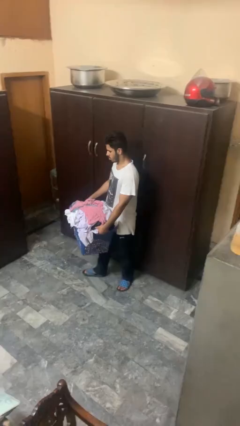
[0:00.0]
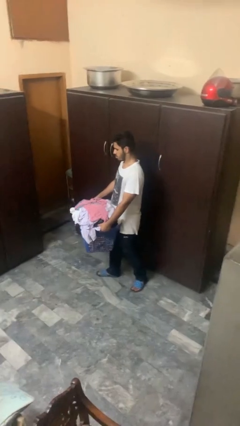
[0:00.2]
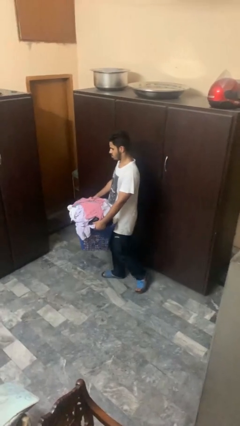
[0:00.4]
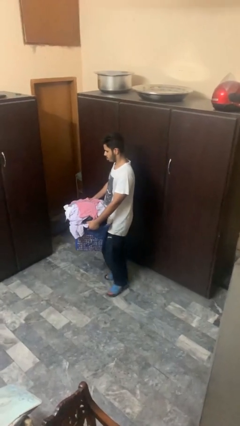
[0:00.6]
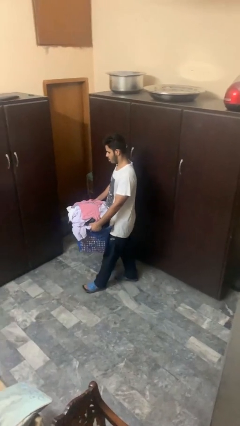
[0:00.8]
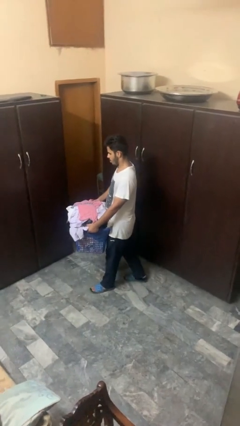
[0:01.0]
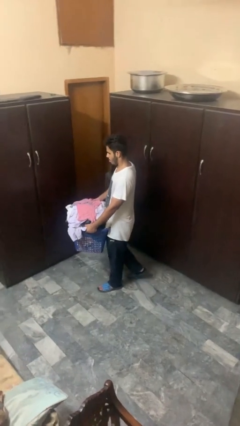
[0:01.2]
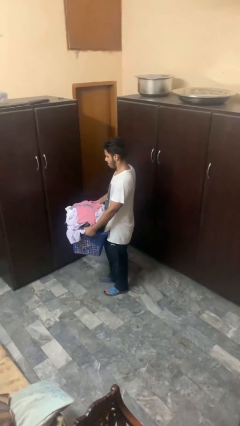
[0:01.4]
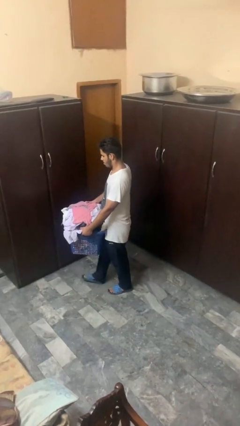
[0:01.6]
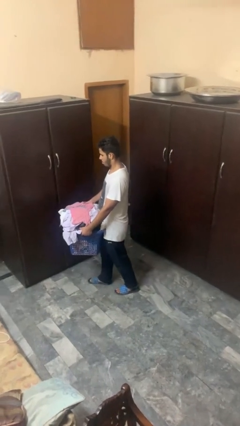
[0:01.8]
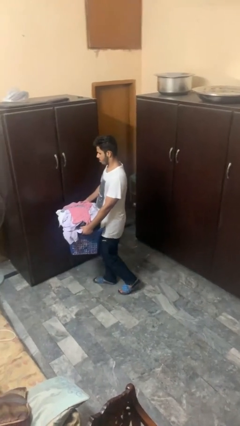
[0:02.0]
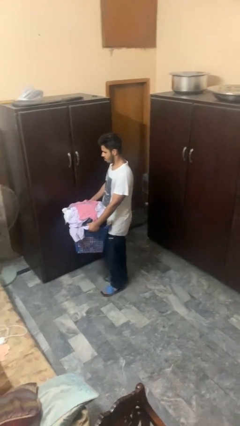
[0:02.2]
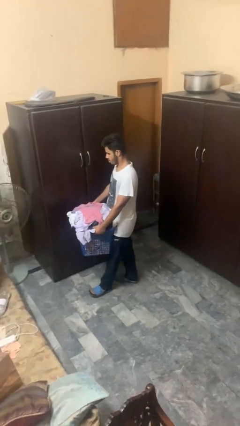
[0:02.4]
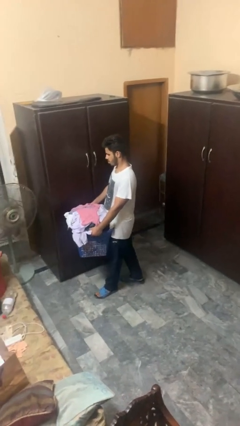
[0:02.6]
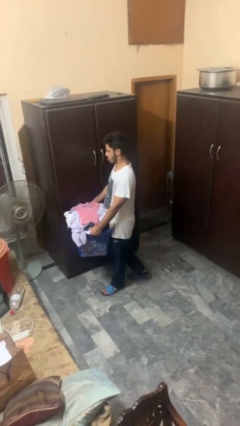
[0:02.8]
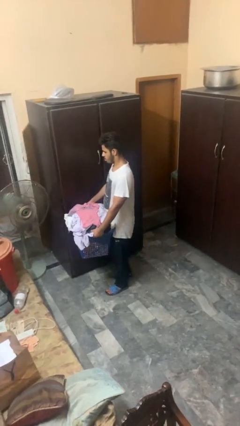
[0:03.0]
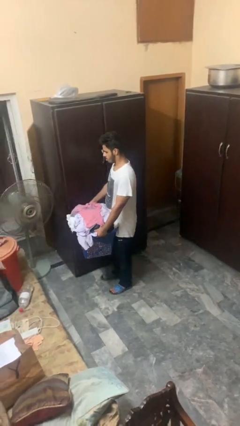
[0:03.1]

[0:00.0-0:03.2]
person carries laundry basket

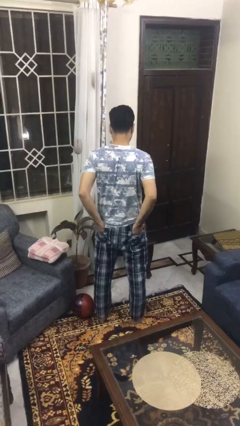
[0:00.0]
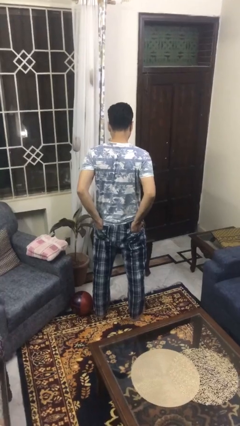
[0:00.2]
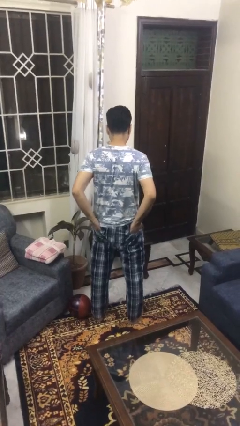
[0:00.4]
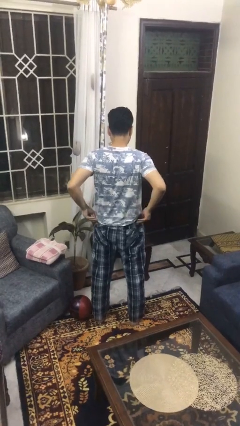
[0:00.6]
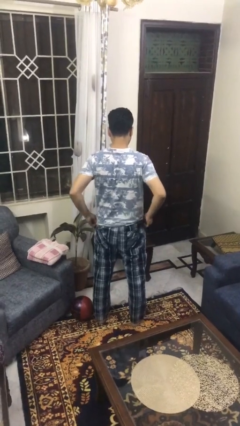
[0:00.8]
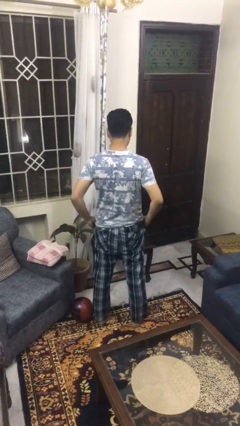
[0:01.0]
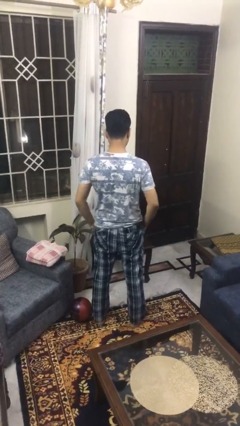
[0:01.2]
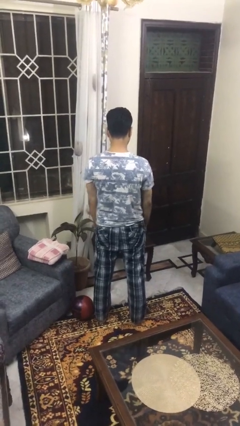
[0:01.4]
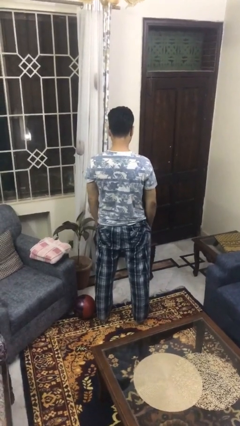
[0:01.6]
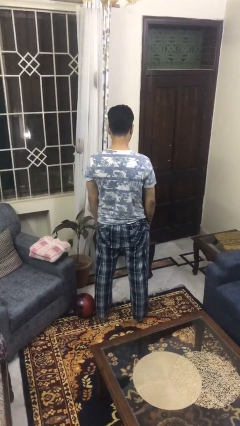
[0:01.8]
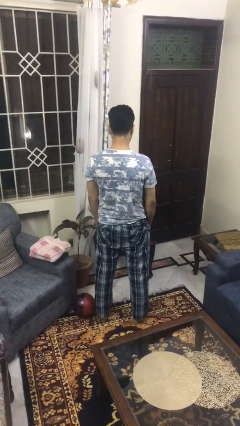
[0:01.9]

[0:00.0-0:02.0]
person puts hands in back pockets

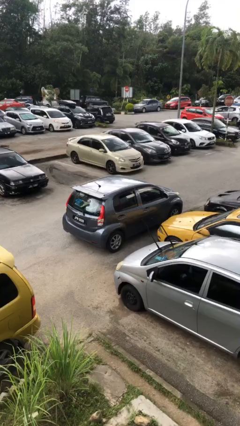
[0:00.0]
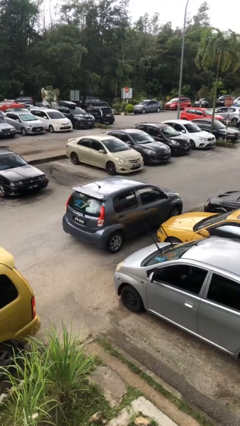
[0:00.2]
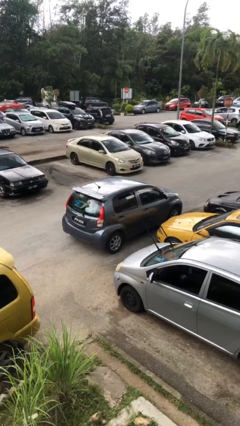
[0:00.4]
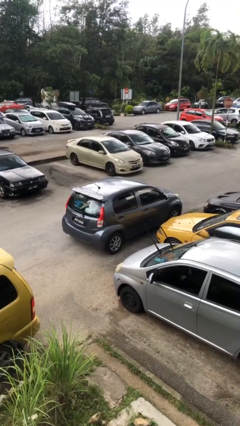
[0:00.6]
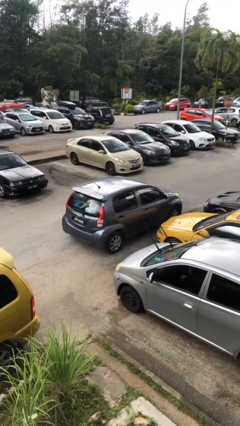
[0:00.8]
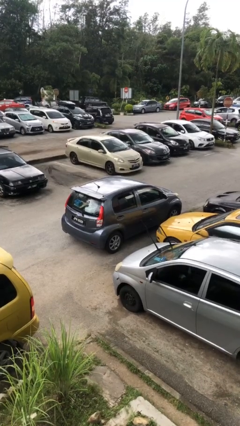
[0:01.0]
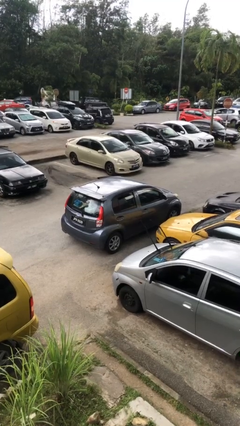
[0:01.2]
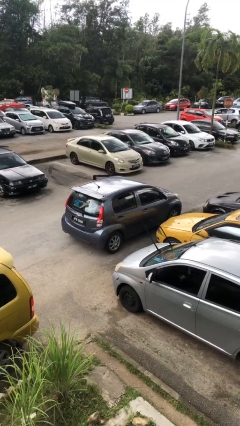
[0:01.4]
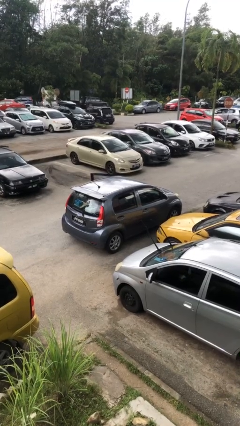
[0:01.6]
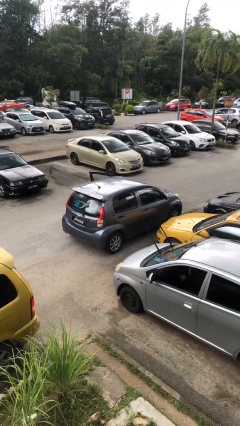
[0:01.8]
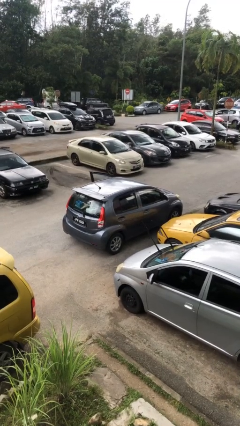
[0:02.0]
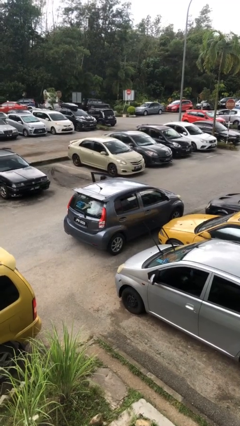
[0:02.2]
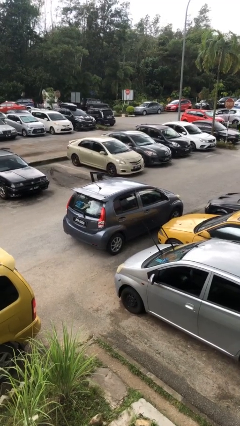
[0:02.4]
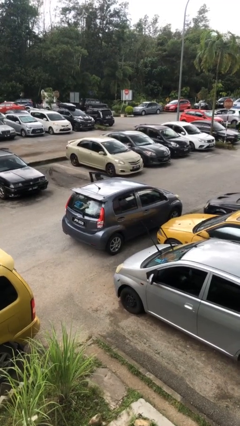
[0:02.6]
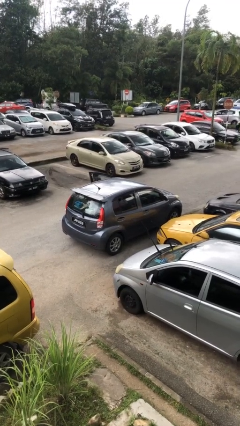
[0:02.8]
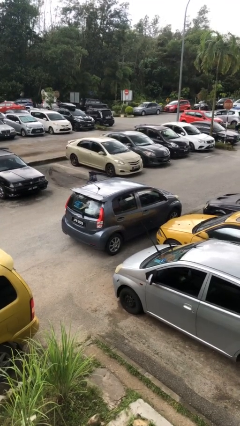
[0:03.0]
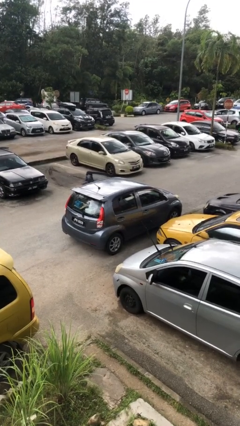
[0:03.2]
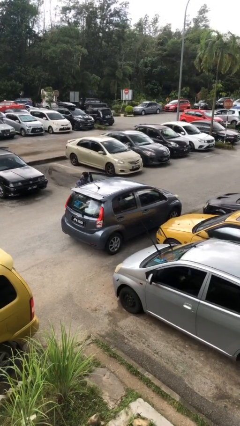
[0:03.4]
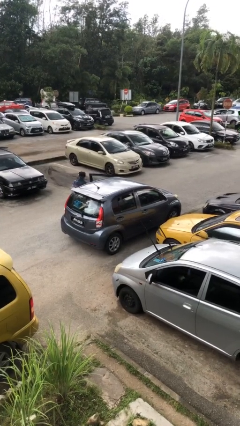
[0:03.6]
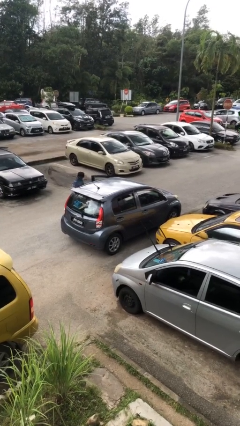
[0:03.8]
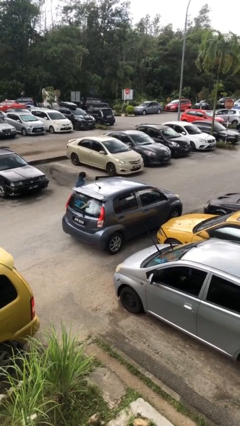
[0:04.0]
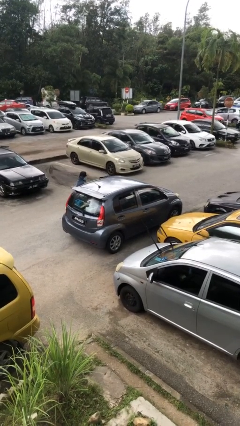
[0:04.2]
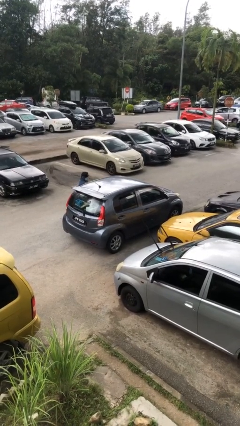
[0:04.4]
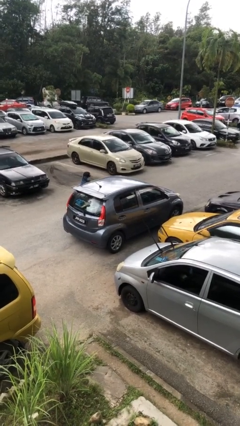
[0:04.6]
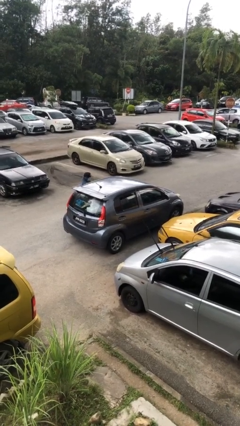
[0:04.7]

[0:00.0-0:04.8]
car drops off person

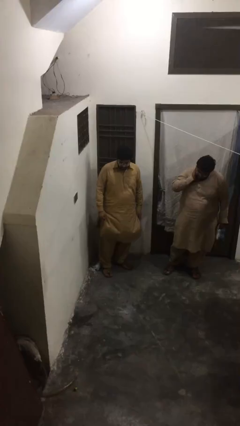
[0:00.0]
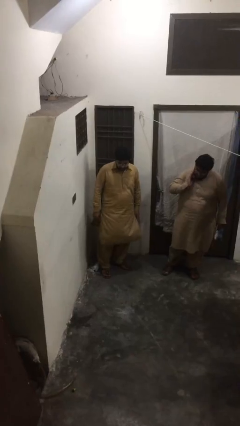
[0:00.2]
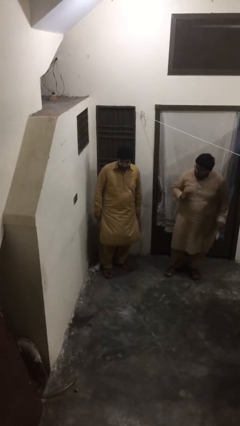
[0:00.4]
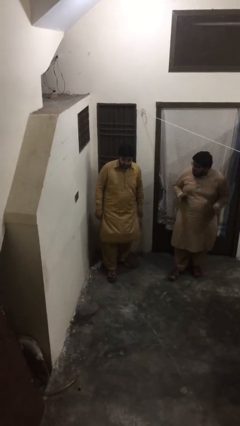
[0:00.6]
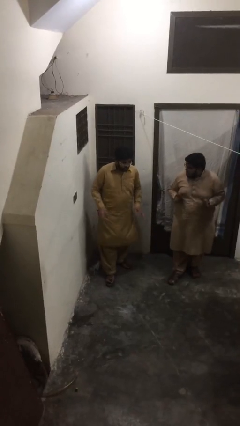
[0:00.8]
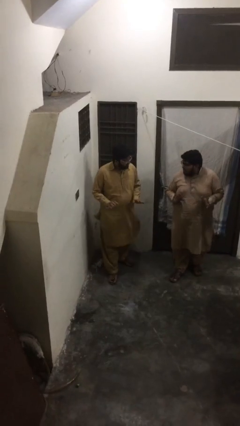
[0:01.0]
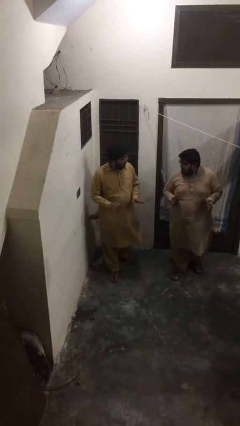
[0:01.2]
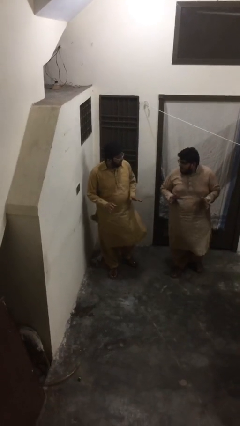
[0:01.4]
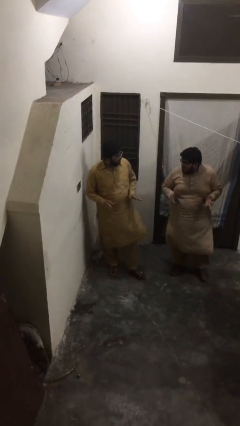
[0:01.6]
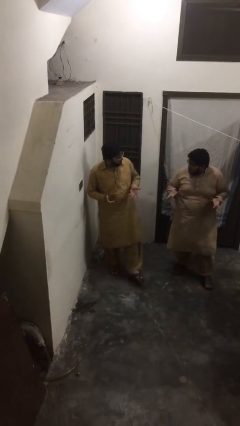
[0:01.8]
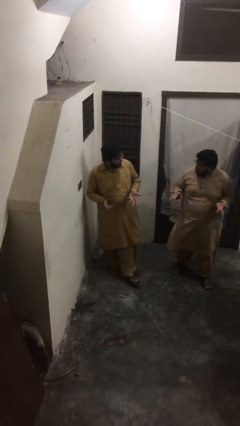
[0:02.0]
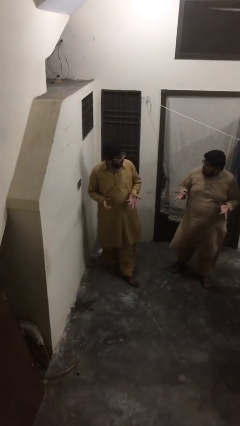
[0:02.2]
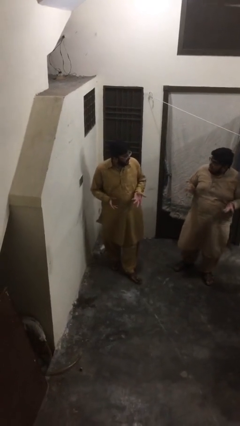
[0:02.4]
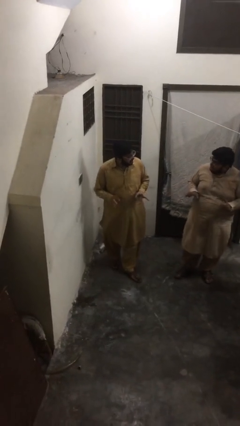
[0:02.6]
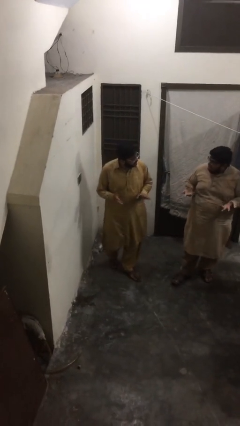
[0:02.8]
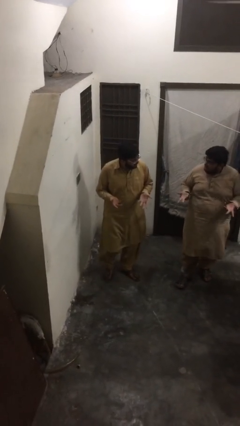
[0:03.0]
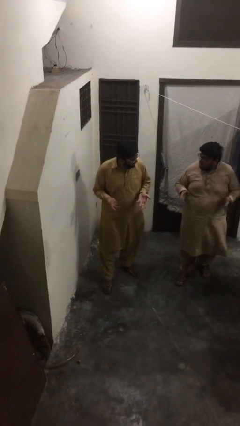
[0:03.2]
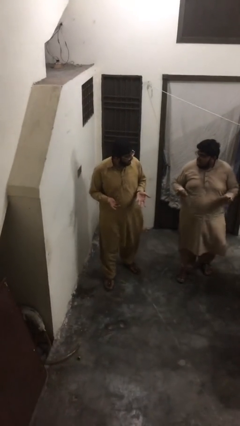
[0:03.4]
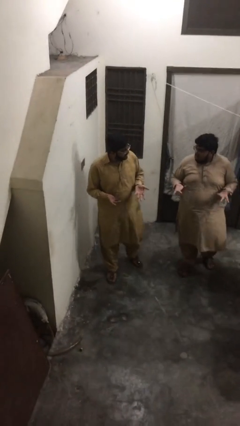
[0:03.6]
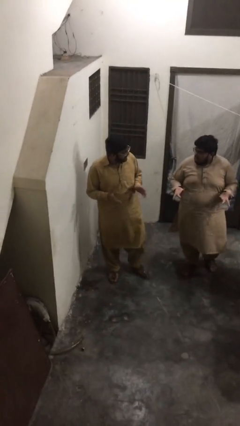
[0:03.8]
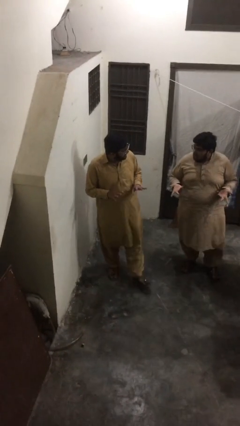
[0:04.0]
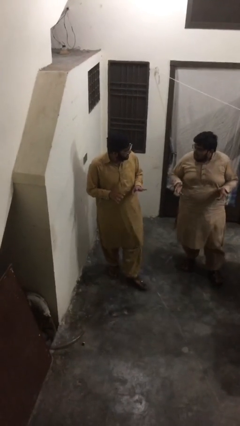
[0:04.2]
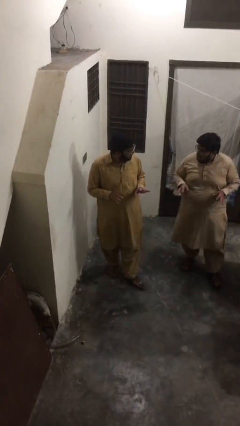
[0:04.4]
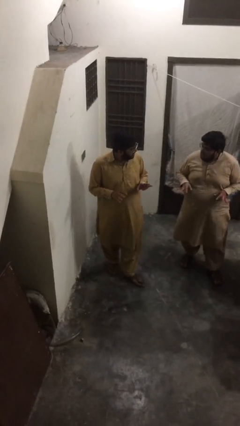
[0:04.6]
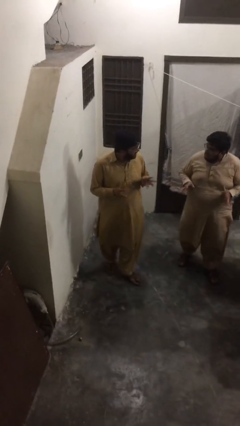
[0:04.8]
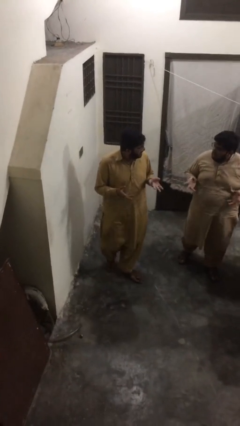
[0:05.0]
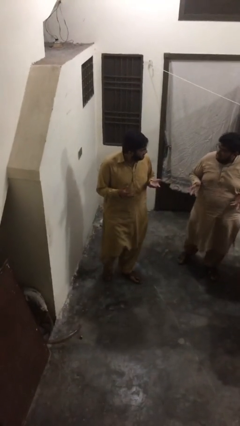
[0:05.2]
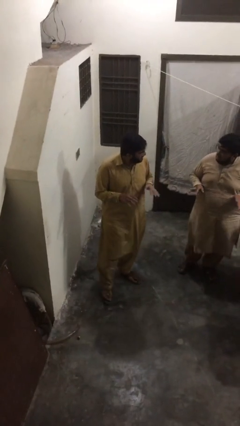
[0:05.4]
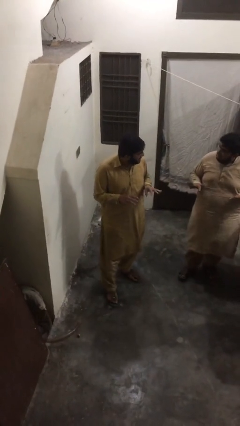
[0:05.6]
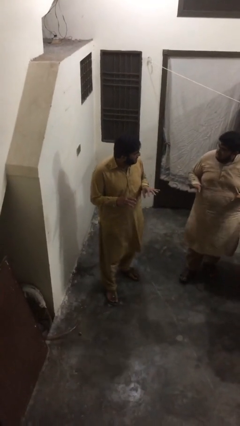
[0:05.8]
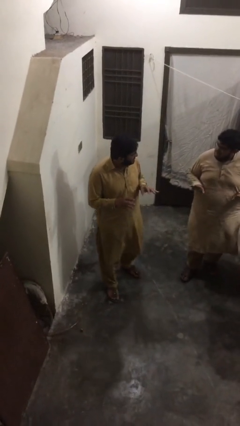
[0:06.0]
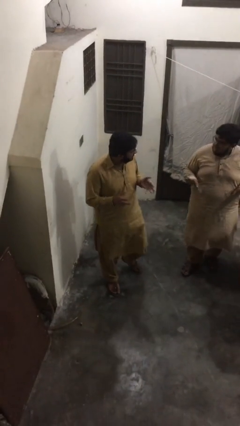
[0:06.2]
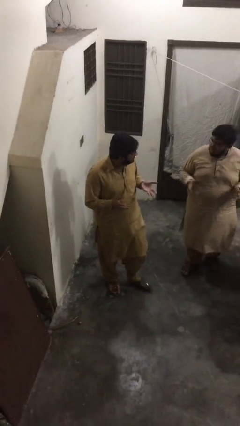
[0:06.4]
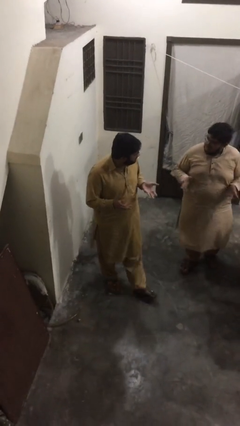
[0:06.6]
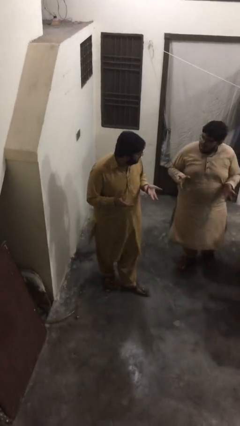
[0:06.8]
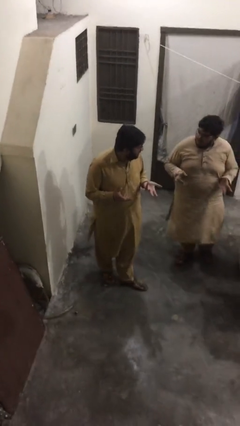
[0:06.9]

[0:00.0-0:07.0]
person talks to person

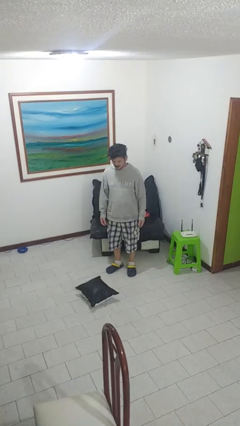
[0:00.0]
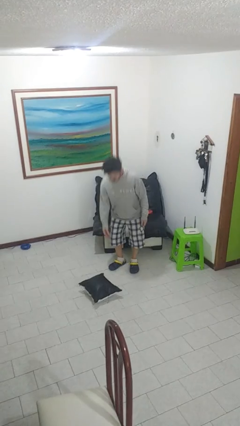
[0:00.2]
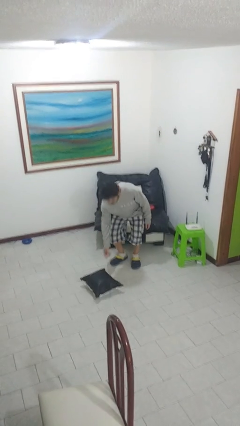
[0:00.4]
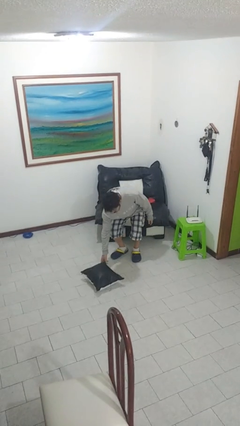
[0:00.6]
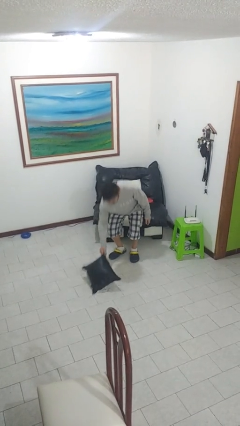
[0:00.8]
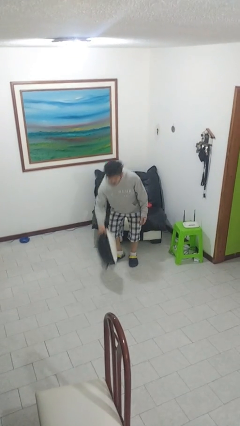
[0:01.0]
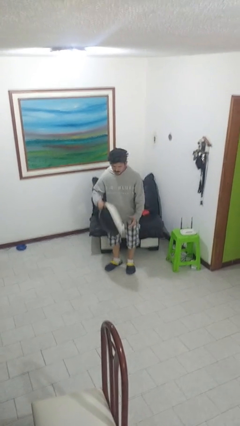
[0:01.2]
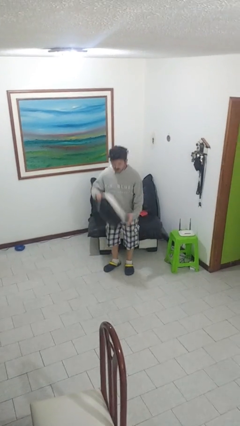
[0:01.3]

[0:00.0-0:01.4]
person picks up object from floor
